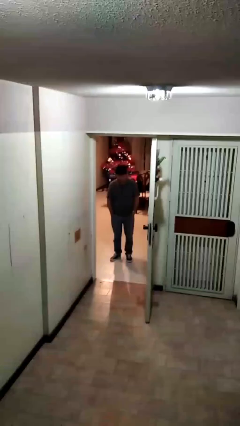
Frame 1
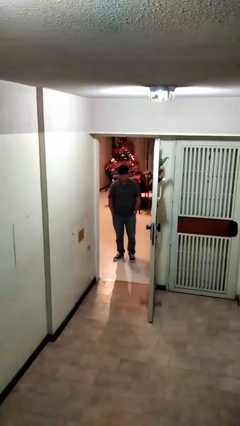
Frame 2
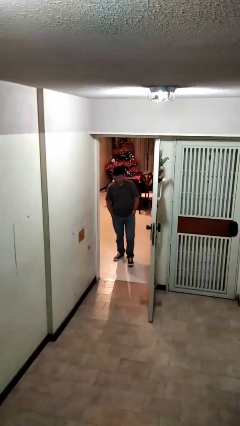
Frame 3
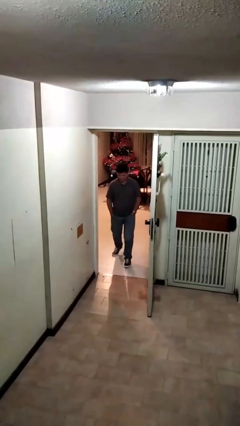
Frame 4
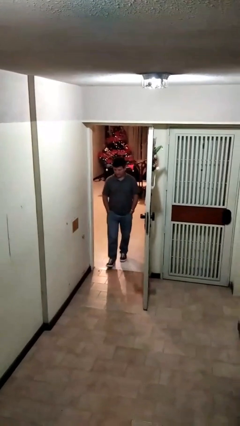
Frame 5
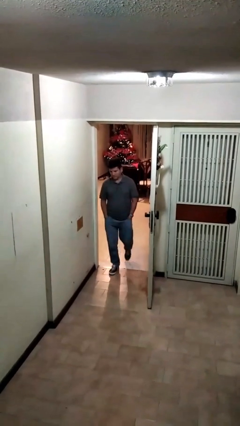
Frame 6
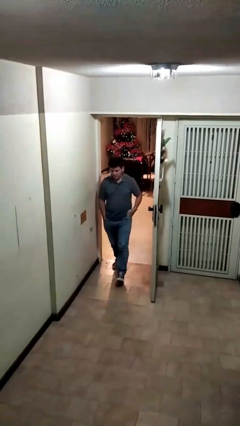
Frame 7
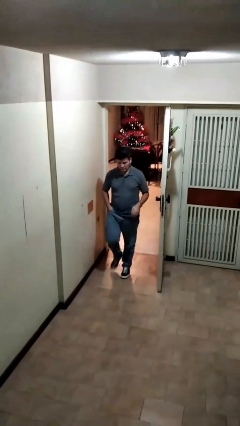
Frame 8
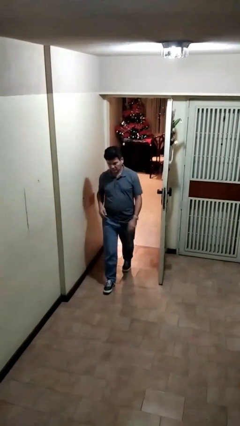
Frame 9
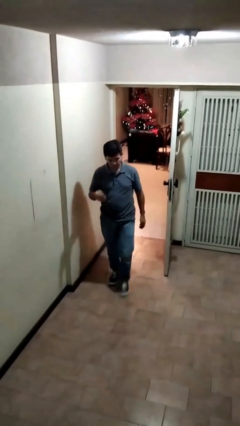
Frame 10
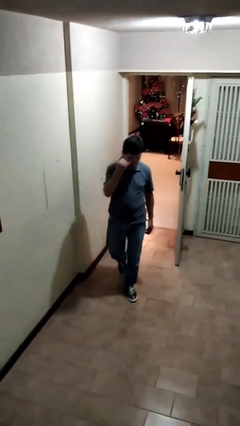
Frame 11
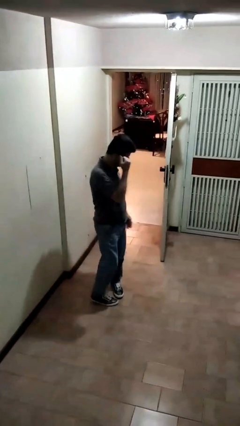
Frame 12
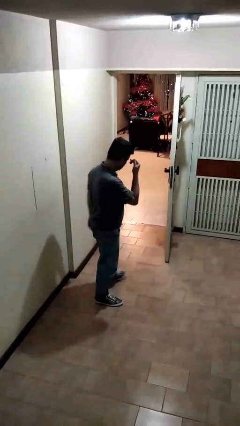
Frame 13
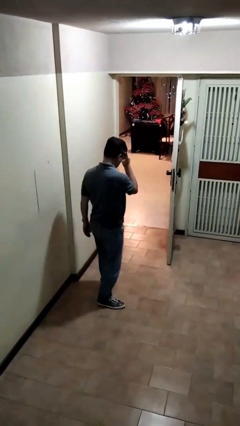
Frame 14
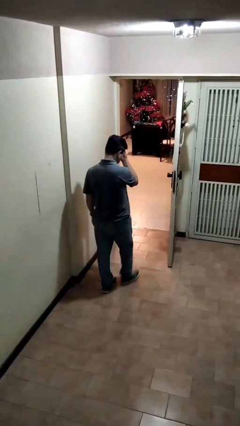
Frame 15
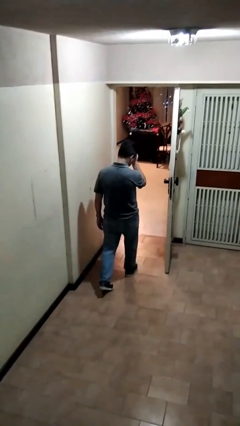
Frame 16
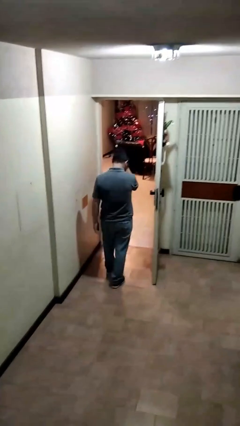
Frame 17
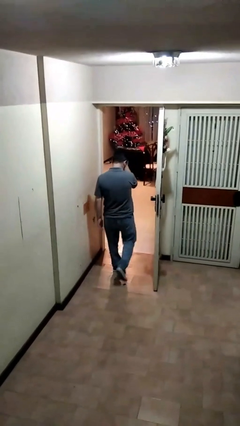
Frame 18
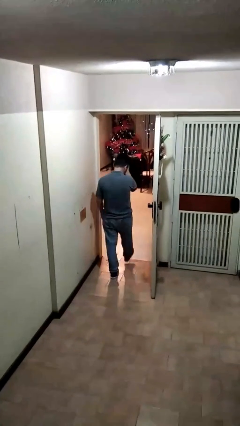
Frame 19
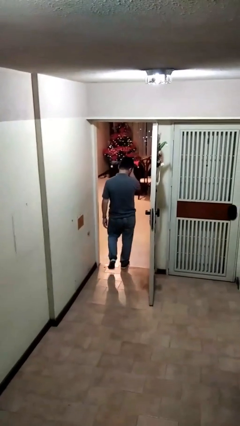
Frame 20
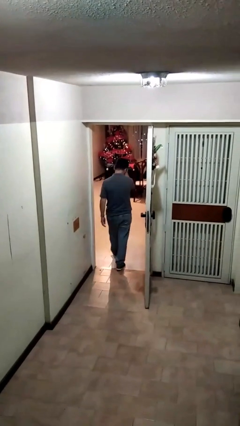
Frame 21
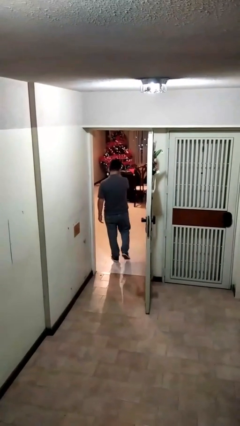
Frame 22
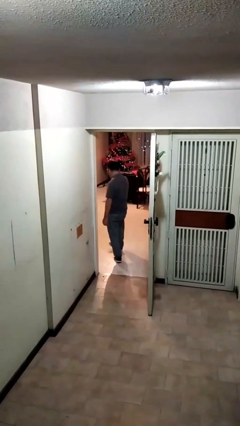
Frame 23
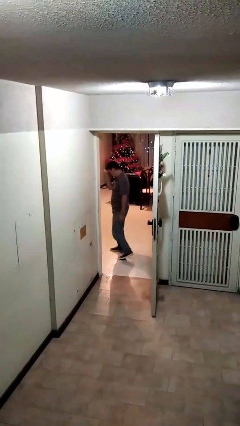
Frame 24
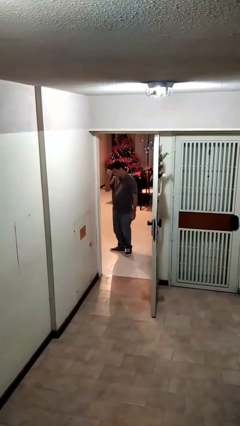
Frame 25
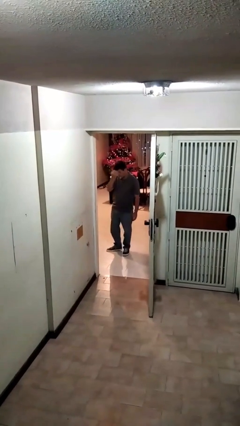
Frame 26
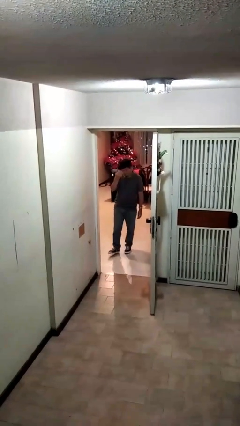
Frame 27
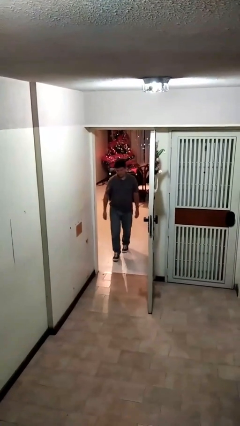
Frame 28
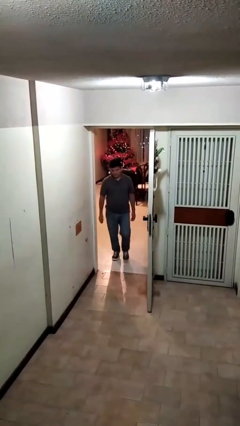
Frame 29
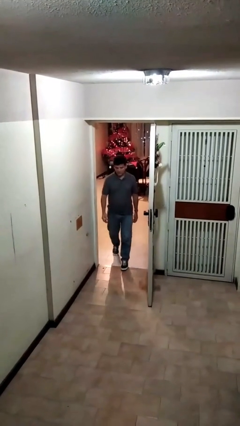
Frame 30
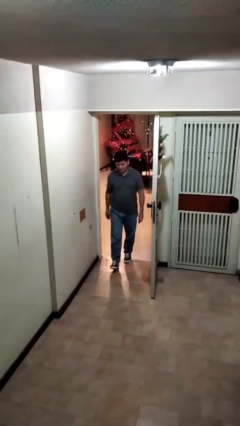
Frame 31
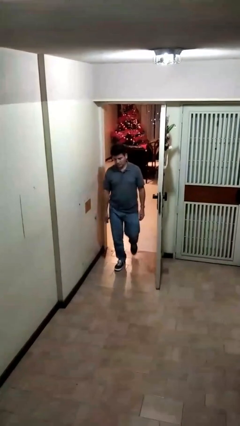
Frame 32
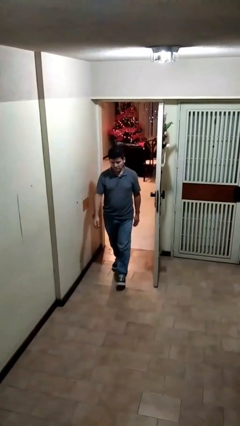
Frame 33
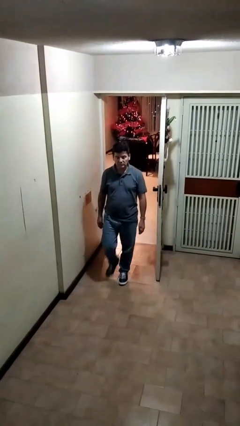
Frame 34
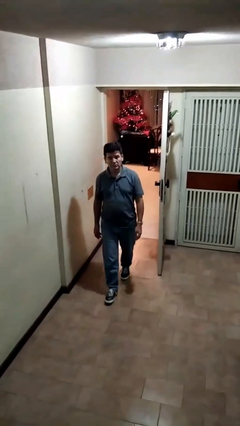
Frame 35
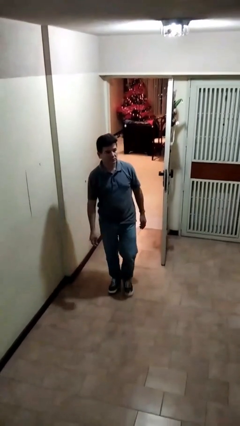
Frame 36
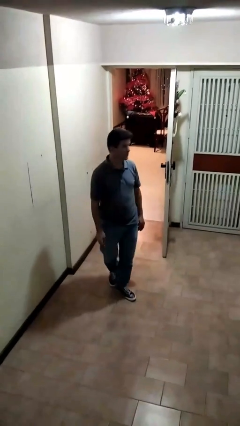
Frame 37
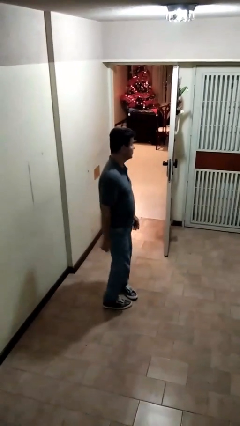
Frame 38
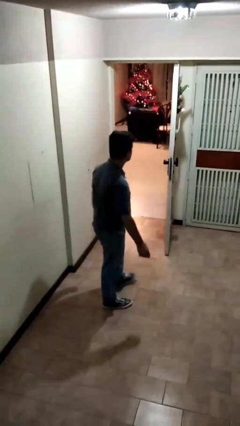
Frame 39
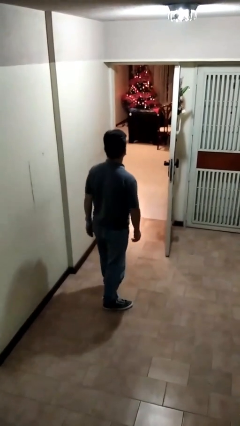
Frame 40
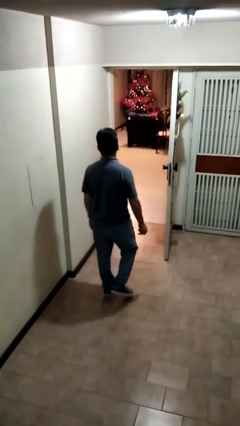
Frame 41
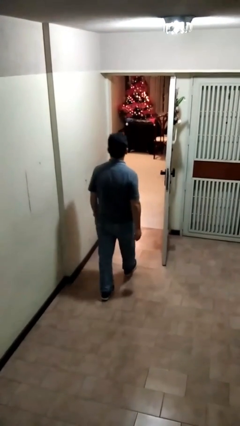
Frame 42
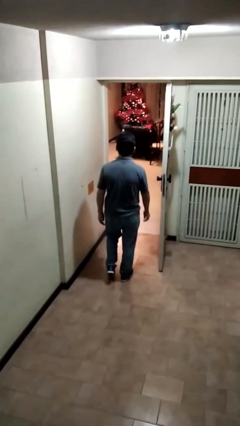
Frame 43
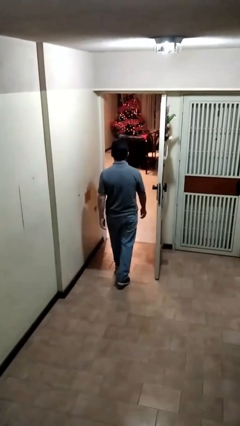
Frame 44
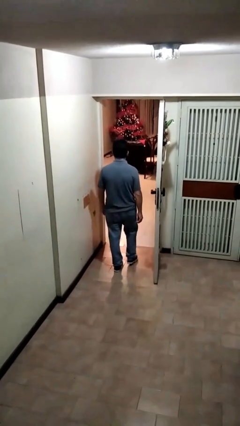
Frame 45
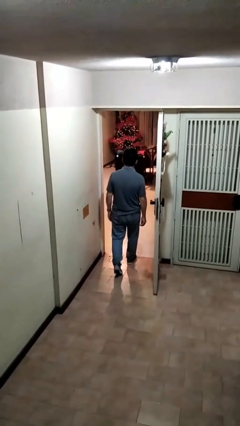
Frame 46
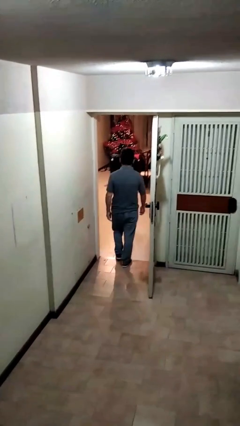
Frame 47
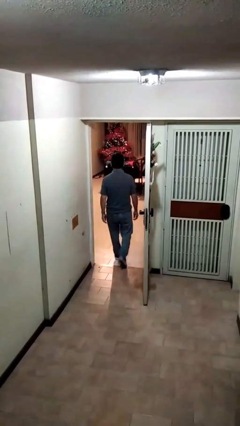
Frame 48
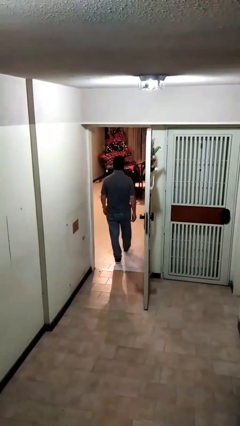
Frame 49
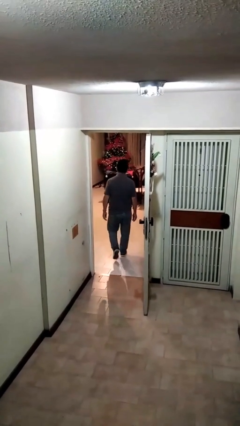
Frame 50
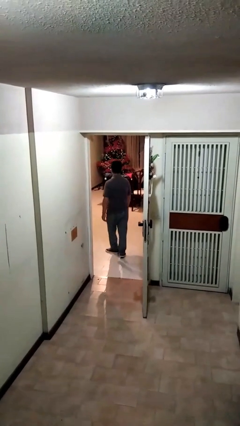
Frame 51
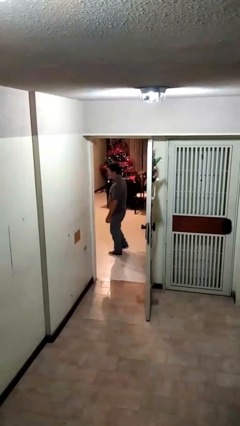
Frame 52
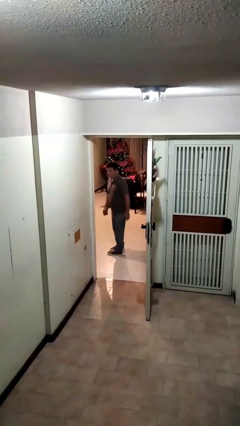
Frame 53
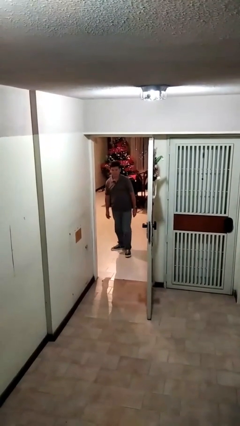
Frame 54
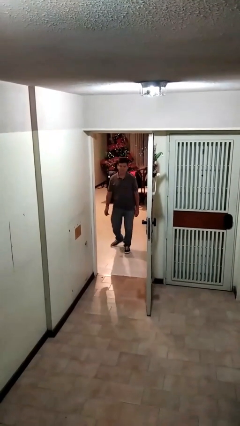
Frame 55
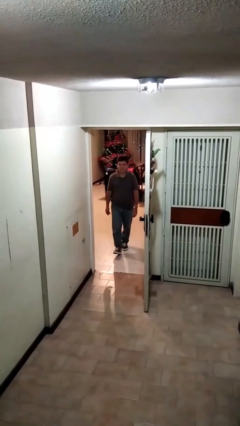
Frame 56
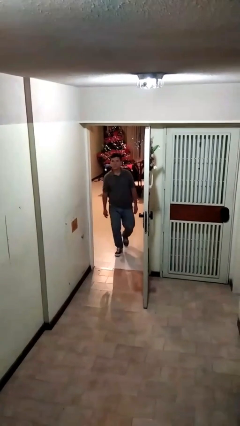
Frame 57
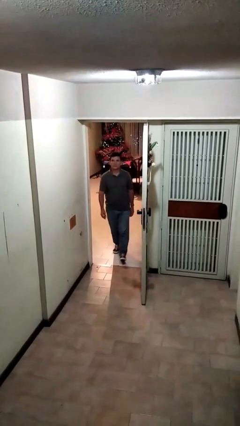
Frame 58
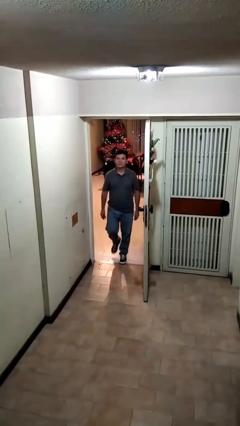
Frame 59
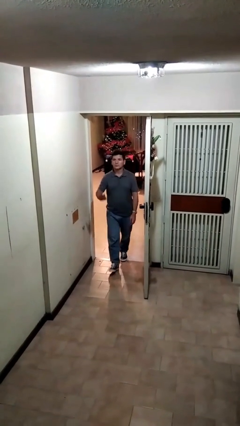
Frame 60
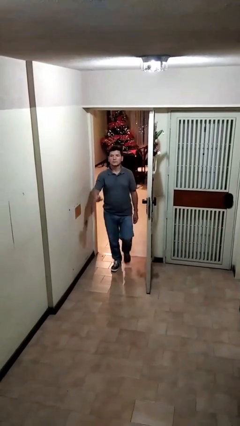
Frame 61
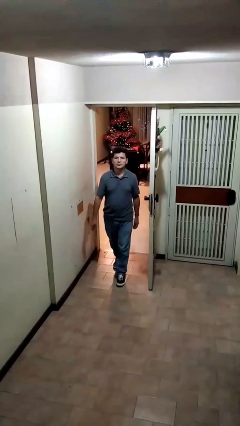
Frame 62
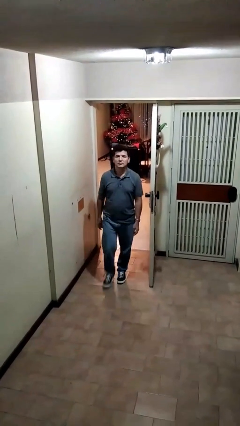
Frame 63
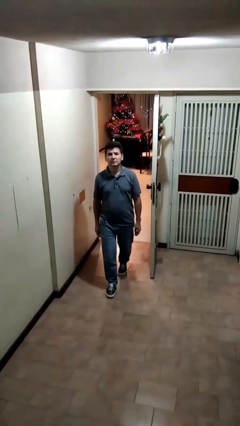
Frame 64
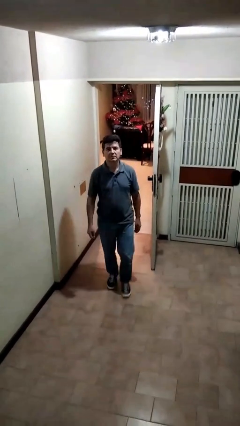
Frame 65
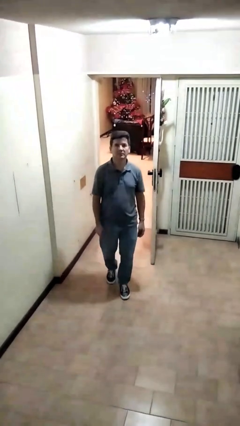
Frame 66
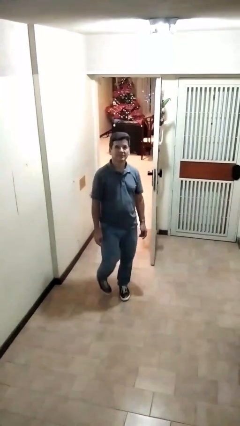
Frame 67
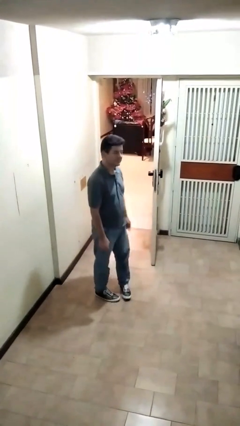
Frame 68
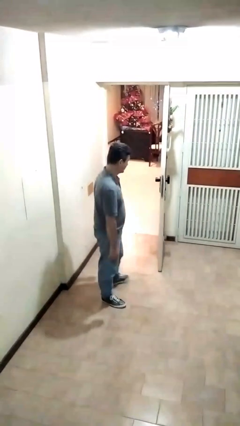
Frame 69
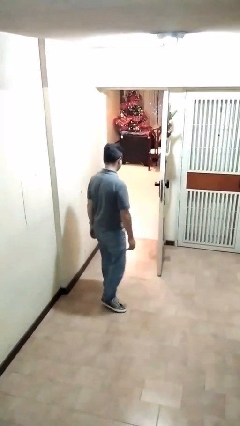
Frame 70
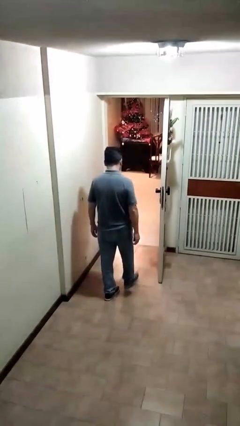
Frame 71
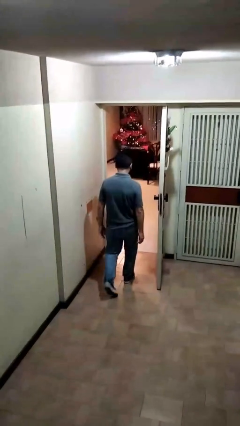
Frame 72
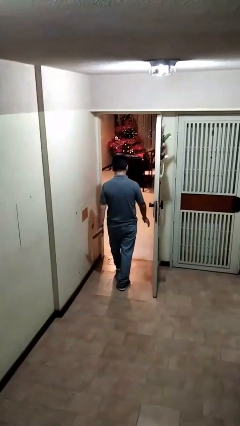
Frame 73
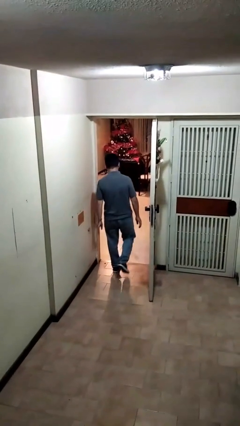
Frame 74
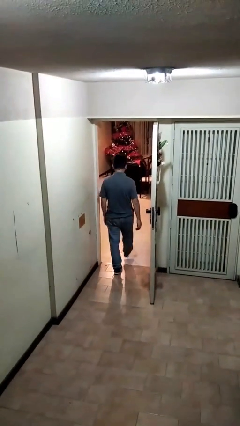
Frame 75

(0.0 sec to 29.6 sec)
person walks

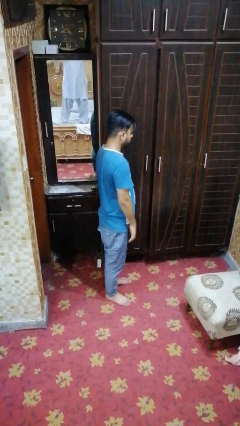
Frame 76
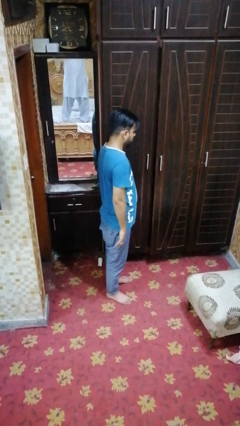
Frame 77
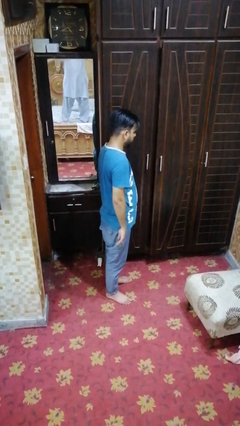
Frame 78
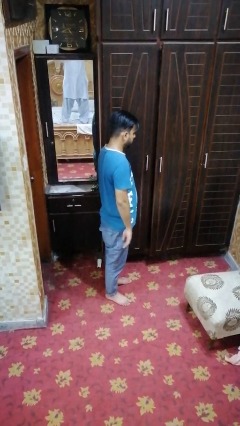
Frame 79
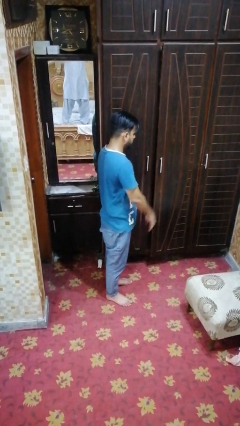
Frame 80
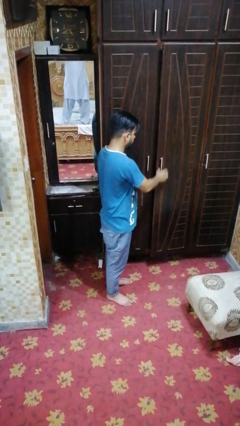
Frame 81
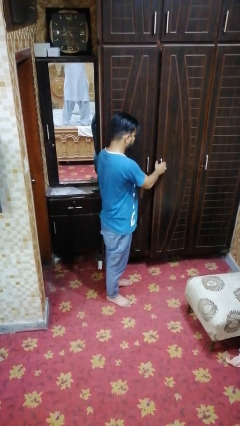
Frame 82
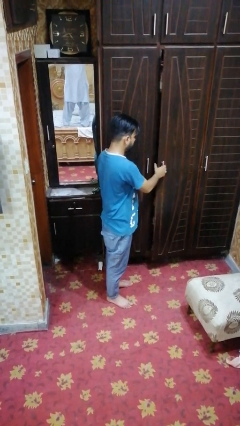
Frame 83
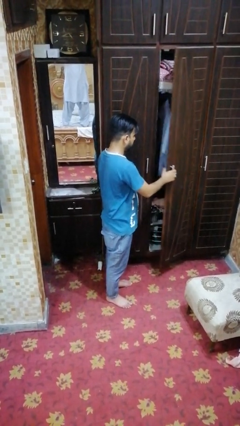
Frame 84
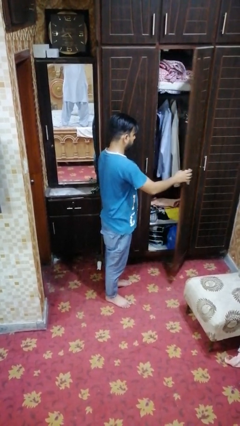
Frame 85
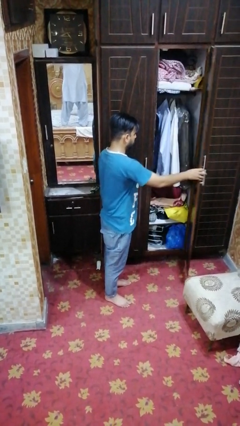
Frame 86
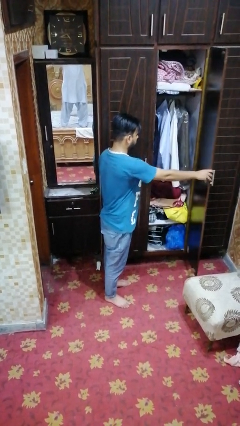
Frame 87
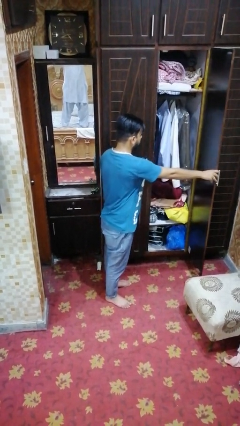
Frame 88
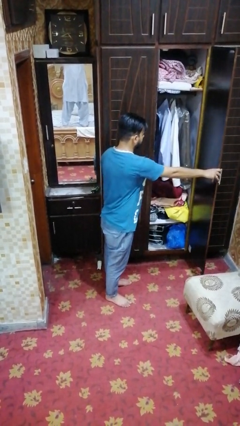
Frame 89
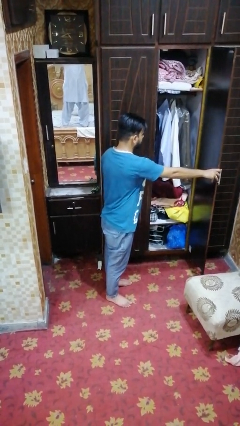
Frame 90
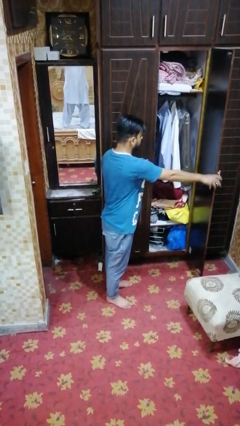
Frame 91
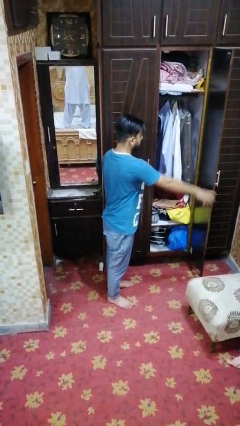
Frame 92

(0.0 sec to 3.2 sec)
person opens closet door
